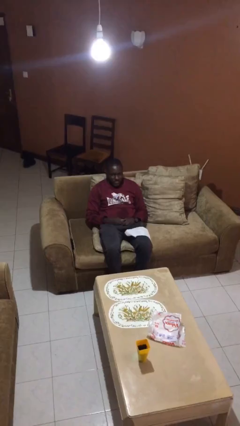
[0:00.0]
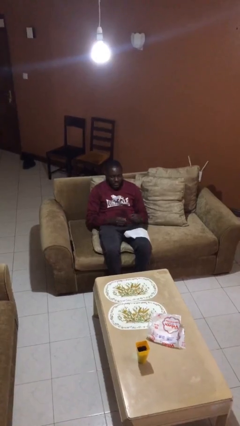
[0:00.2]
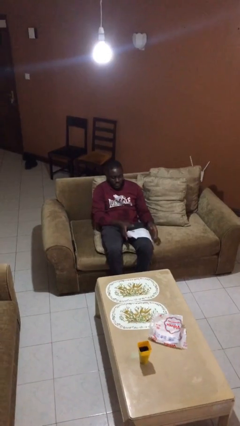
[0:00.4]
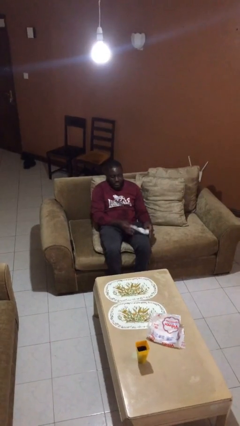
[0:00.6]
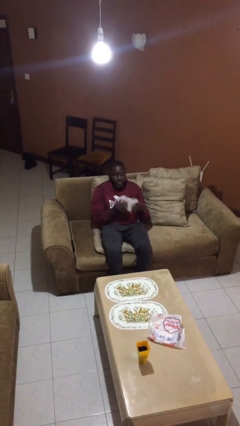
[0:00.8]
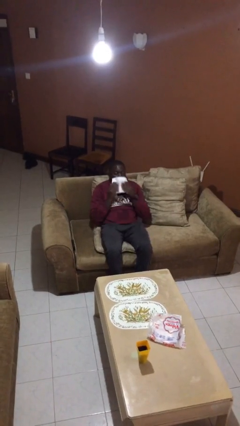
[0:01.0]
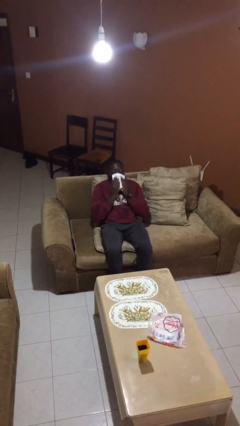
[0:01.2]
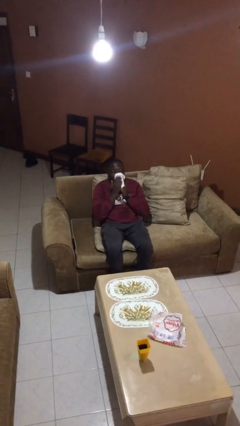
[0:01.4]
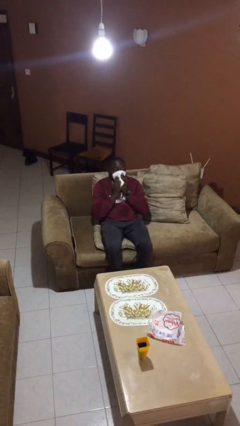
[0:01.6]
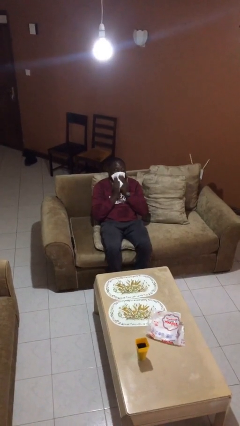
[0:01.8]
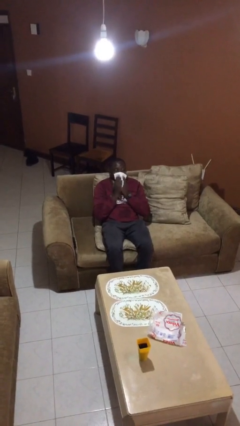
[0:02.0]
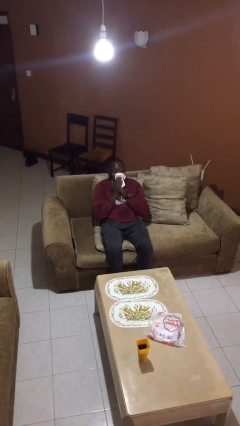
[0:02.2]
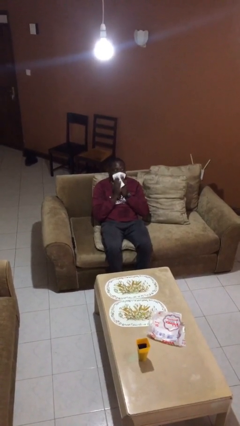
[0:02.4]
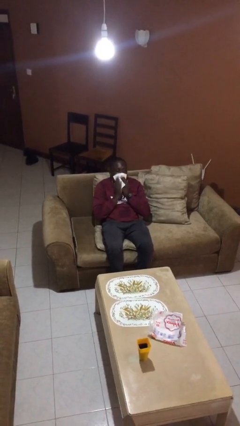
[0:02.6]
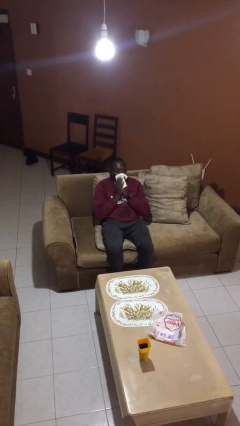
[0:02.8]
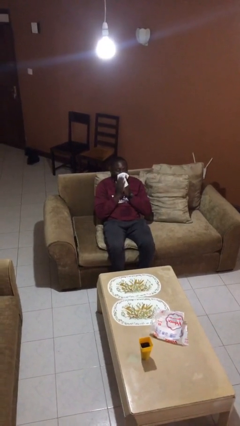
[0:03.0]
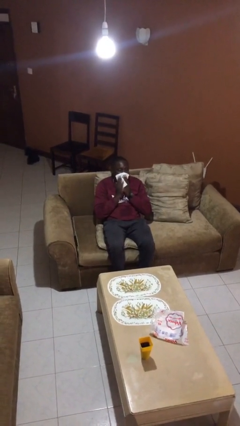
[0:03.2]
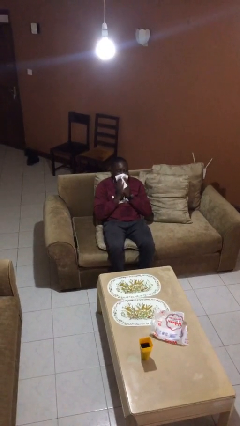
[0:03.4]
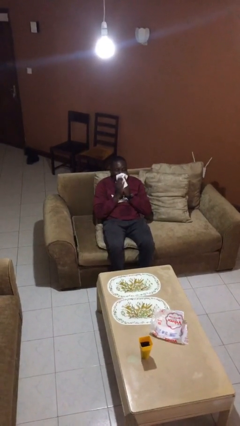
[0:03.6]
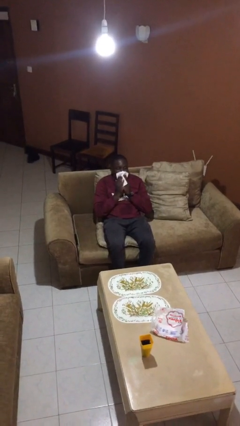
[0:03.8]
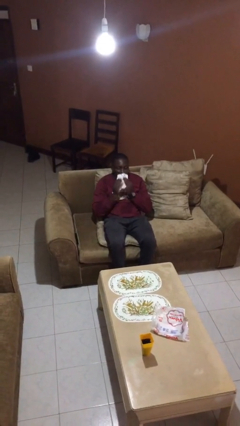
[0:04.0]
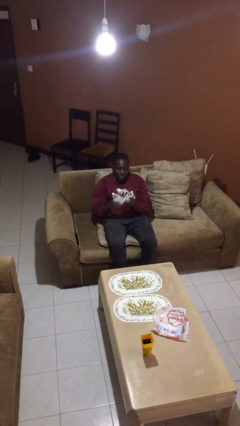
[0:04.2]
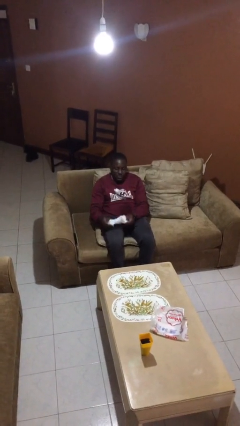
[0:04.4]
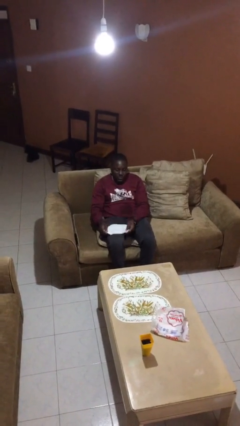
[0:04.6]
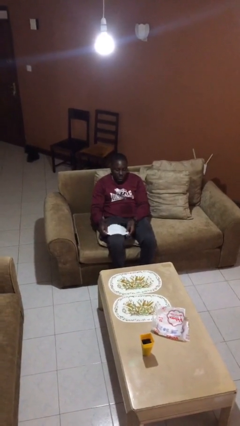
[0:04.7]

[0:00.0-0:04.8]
person wipes mouth with napkin

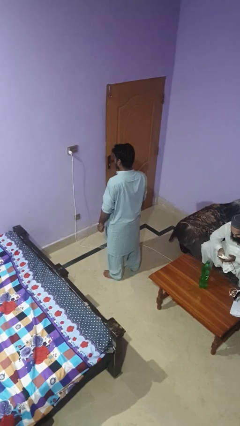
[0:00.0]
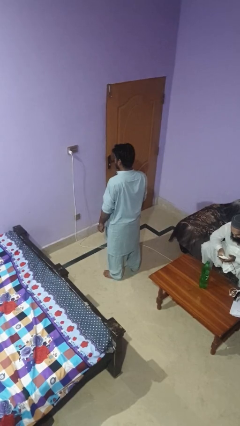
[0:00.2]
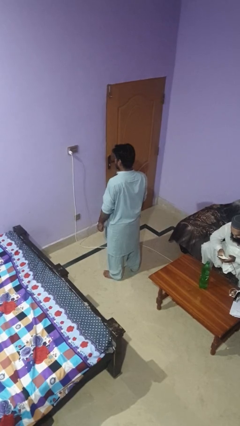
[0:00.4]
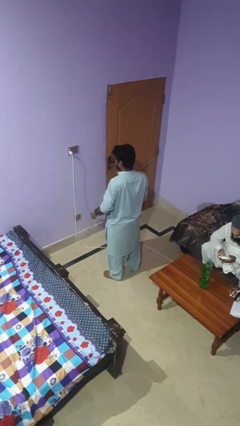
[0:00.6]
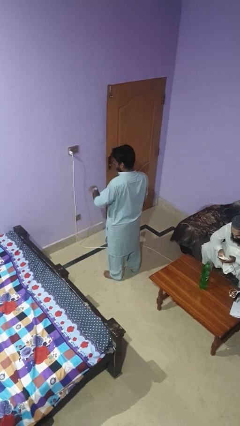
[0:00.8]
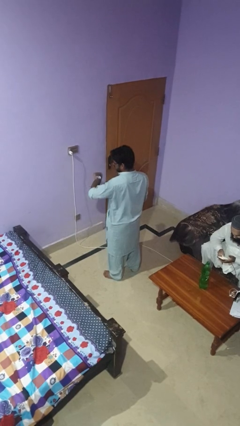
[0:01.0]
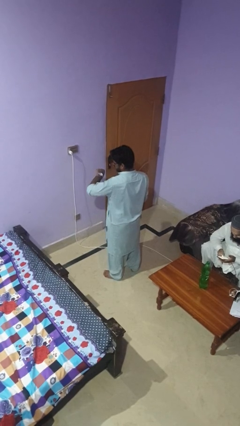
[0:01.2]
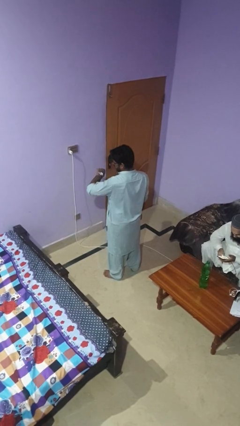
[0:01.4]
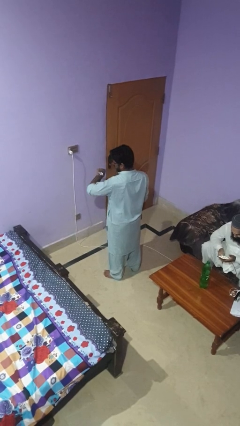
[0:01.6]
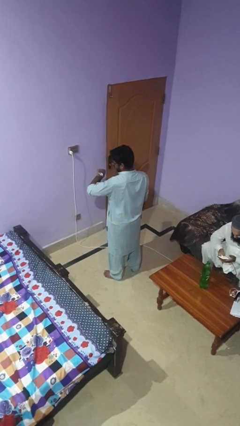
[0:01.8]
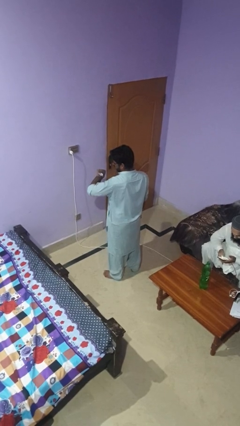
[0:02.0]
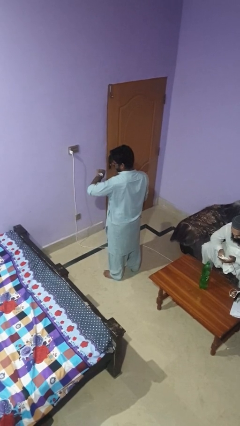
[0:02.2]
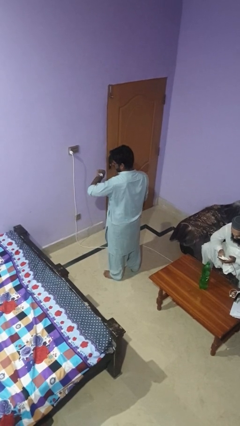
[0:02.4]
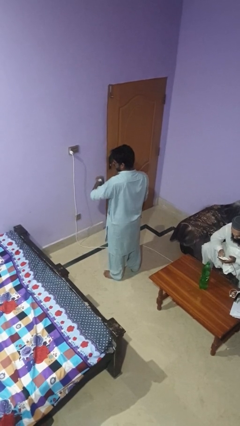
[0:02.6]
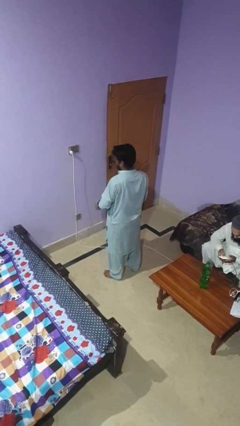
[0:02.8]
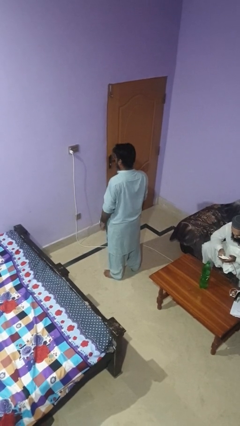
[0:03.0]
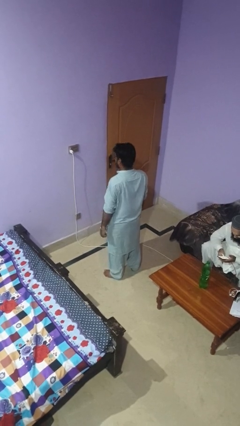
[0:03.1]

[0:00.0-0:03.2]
person looks at wristwatch

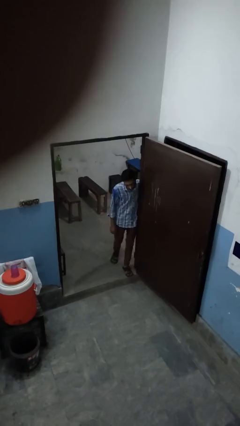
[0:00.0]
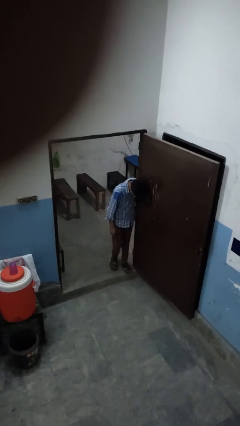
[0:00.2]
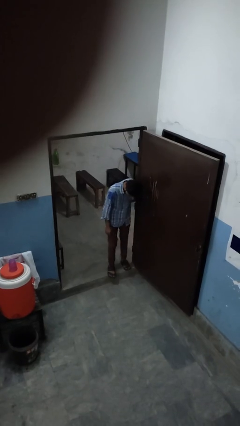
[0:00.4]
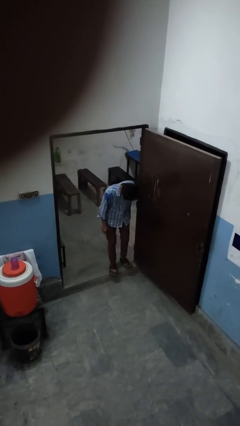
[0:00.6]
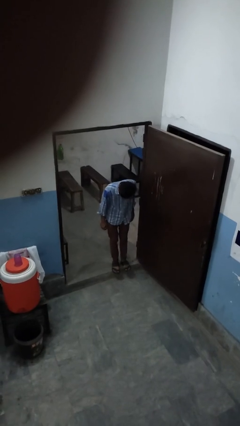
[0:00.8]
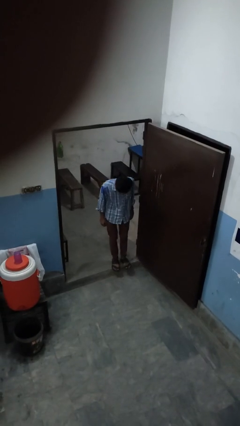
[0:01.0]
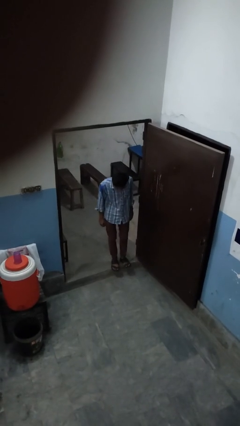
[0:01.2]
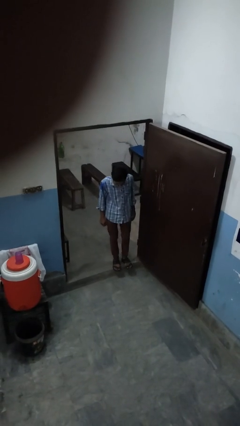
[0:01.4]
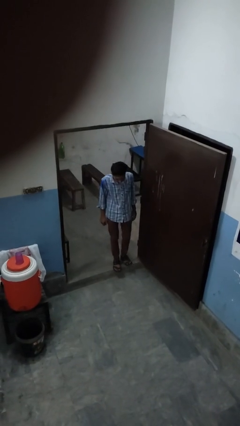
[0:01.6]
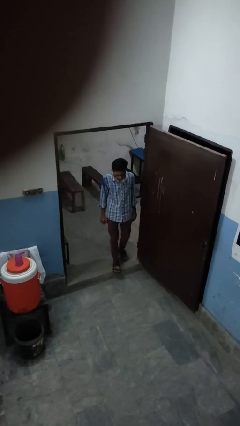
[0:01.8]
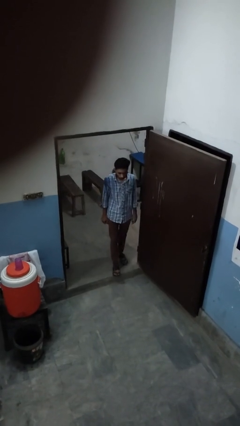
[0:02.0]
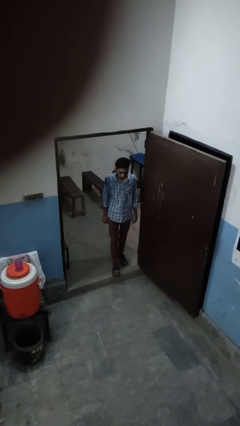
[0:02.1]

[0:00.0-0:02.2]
person bumps into wall

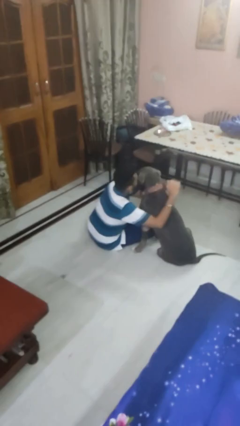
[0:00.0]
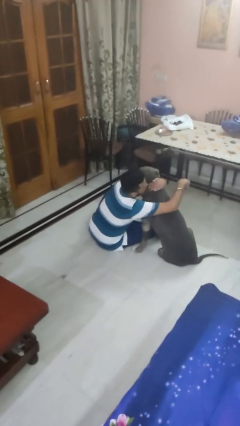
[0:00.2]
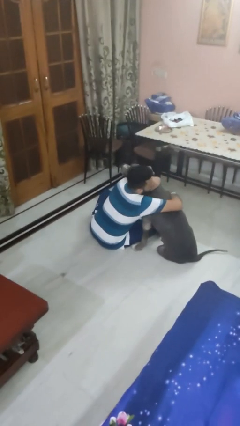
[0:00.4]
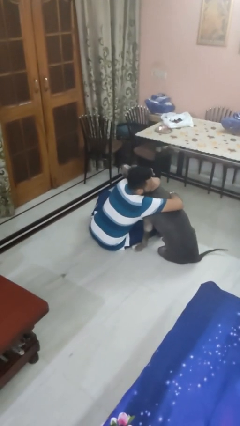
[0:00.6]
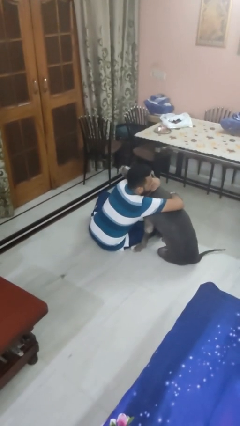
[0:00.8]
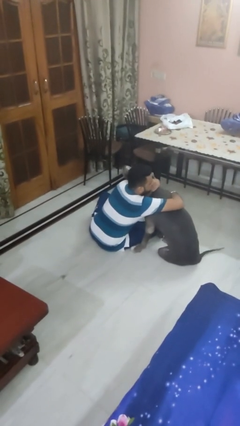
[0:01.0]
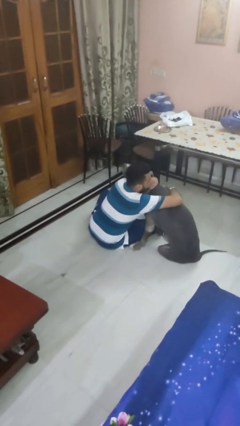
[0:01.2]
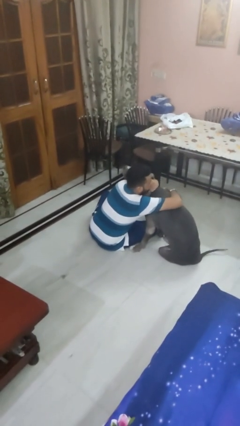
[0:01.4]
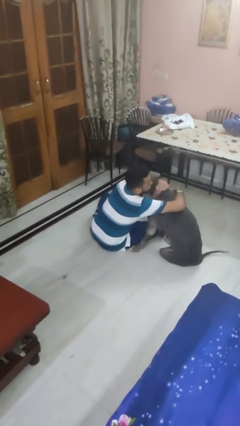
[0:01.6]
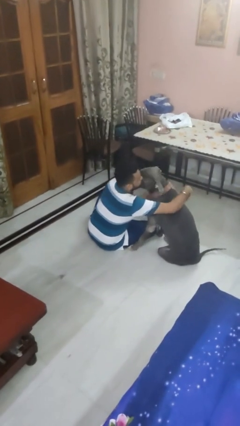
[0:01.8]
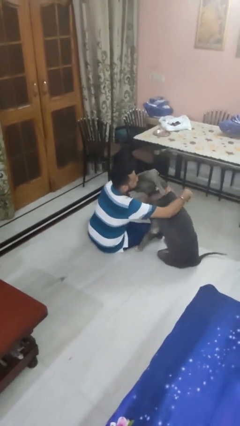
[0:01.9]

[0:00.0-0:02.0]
person hugs dog

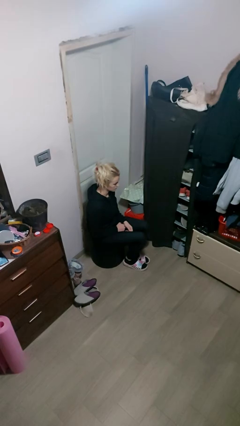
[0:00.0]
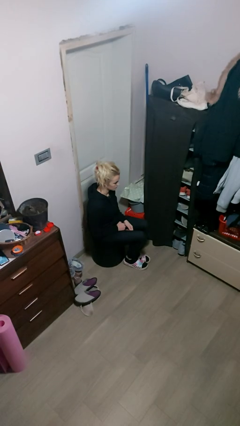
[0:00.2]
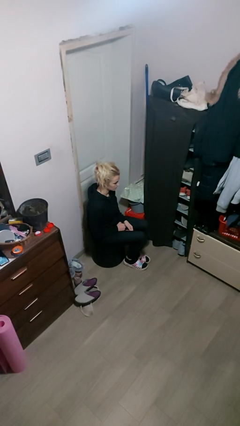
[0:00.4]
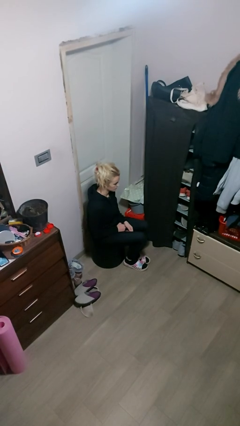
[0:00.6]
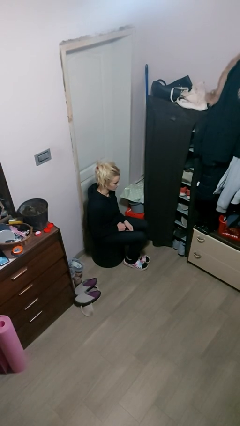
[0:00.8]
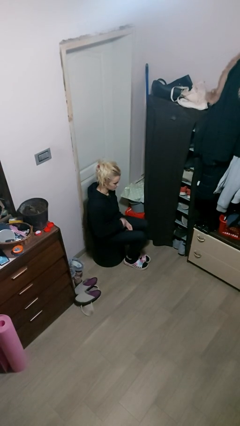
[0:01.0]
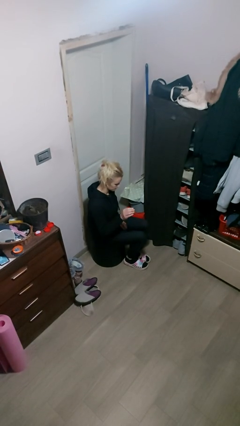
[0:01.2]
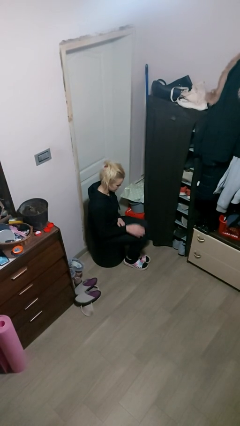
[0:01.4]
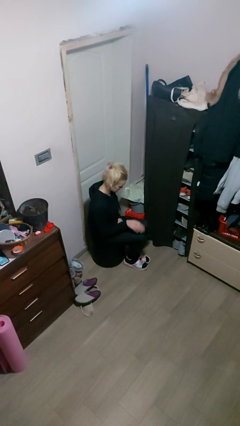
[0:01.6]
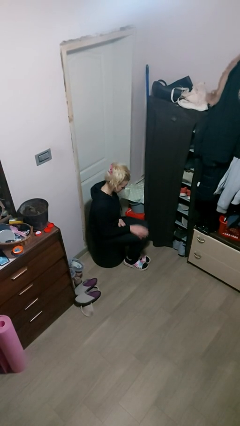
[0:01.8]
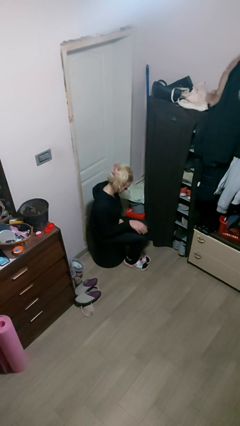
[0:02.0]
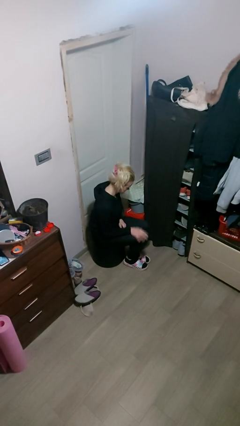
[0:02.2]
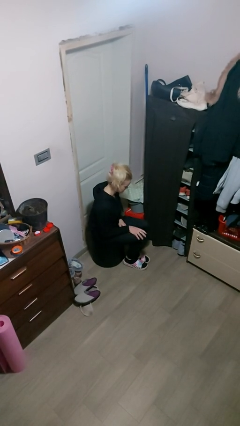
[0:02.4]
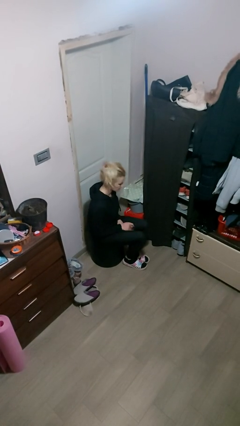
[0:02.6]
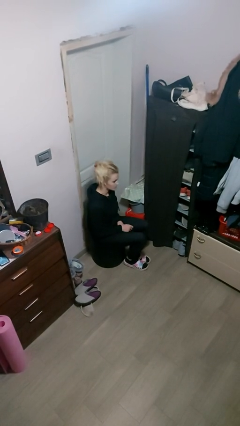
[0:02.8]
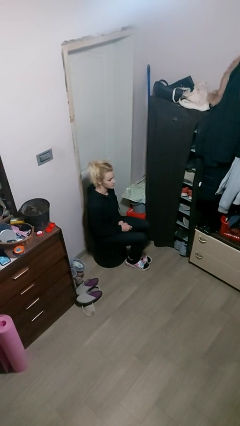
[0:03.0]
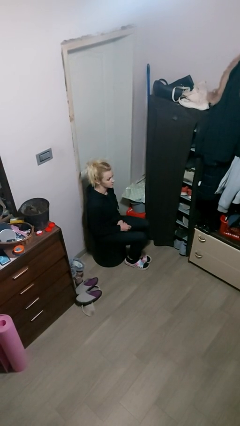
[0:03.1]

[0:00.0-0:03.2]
person slaps hands on thighs

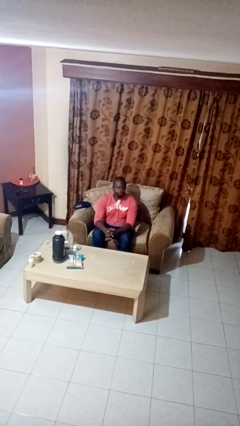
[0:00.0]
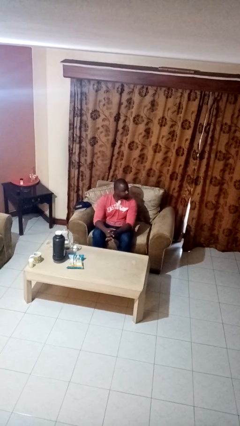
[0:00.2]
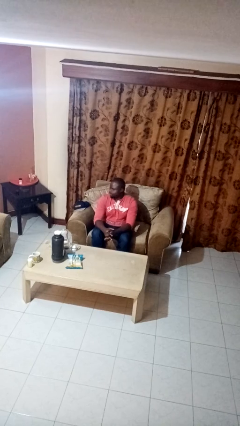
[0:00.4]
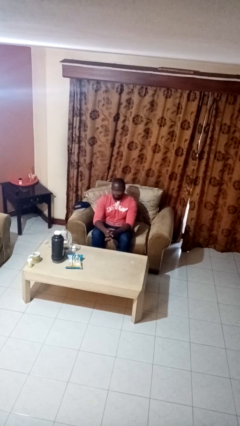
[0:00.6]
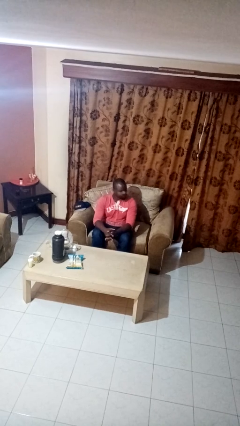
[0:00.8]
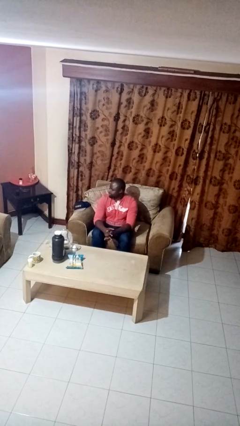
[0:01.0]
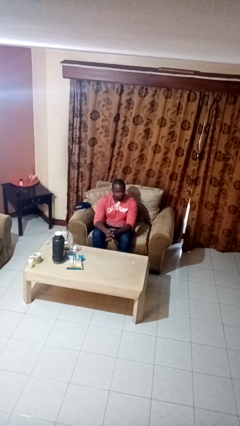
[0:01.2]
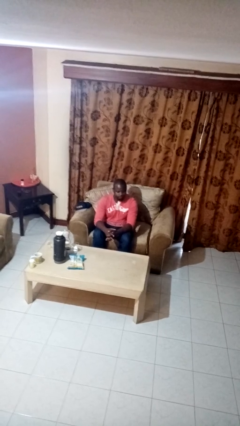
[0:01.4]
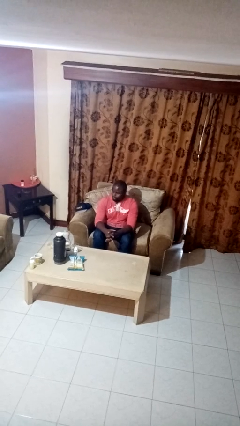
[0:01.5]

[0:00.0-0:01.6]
person shakes head

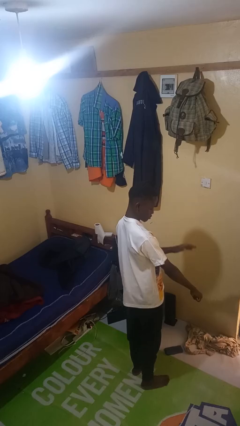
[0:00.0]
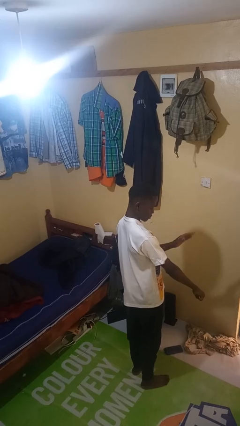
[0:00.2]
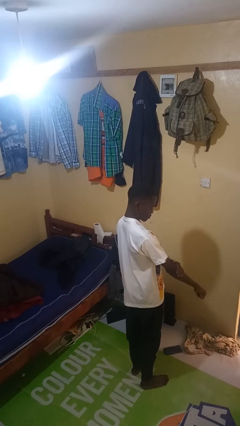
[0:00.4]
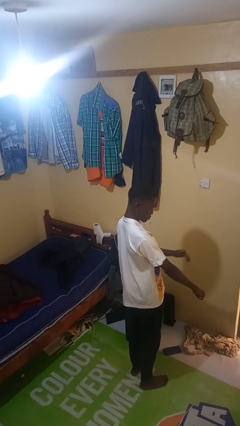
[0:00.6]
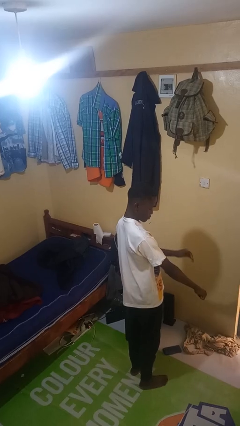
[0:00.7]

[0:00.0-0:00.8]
person swats bug
